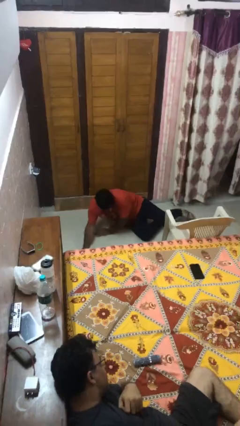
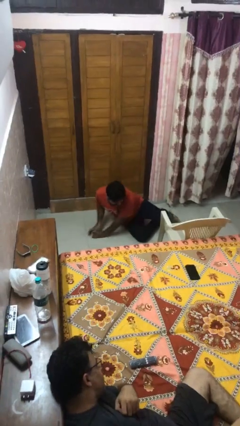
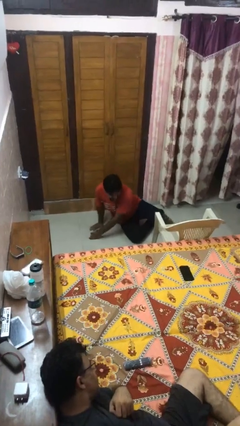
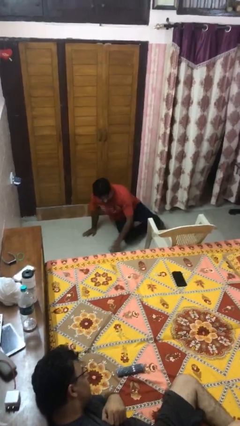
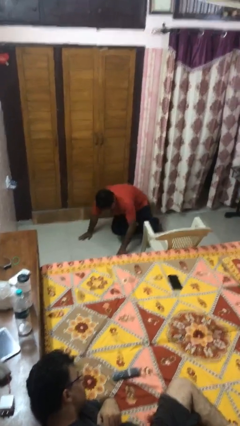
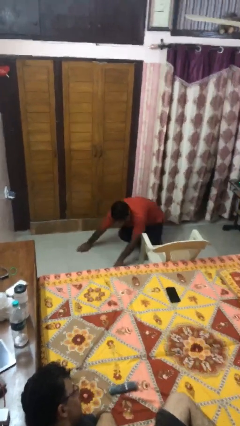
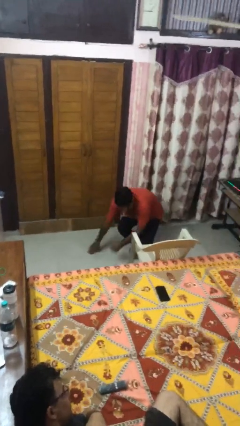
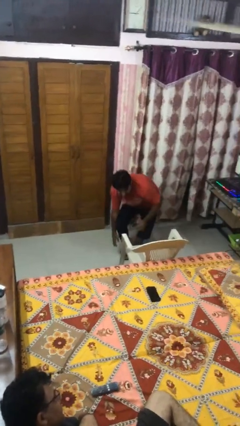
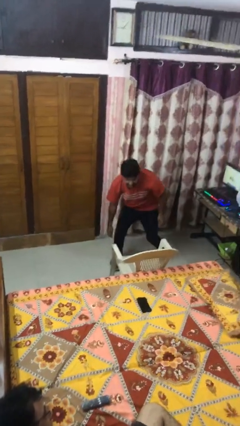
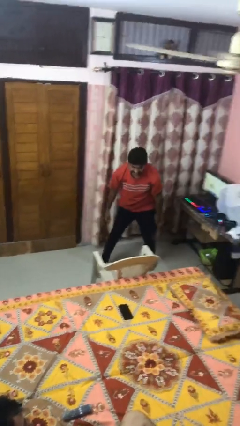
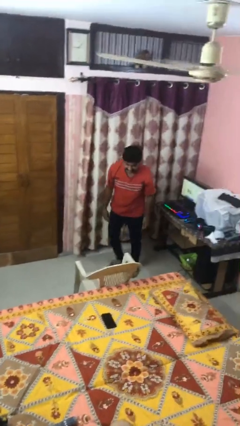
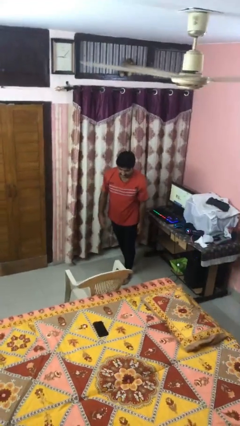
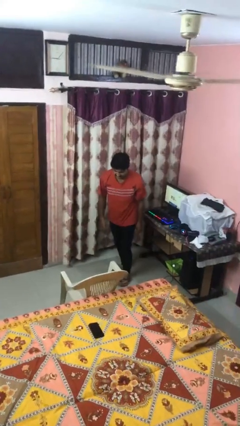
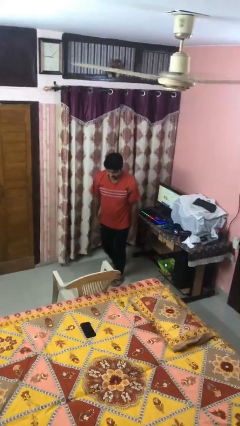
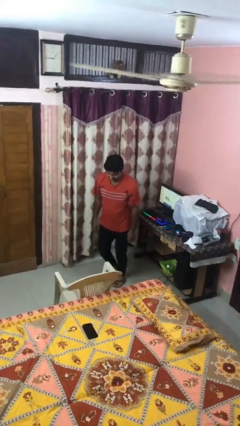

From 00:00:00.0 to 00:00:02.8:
person stands up from floor

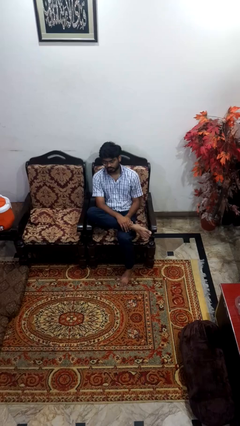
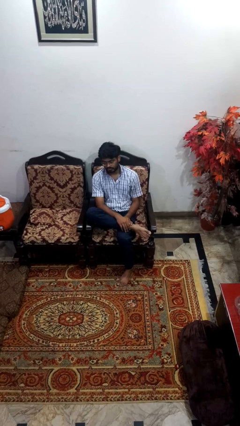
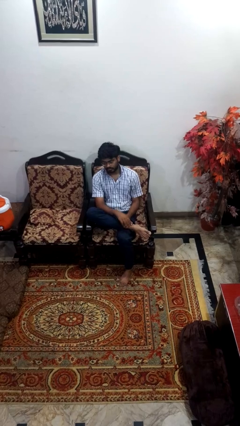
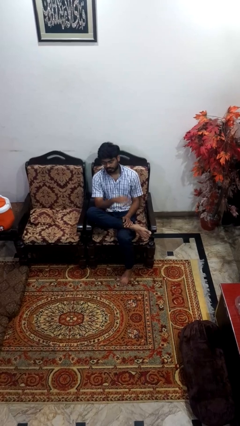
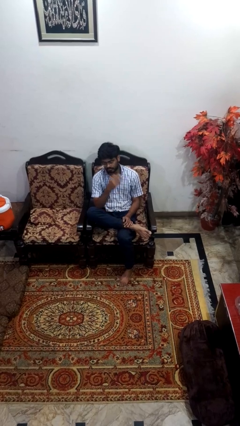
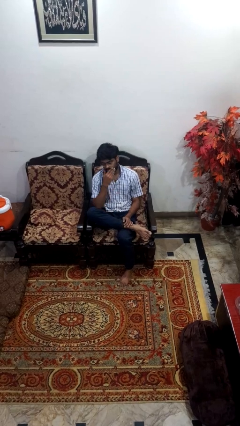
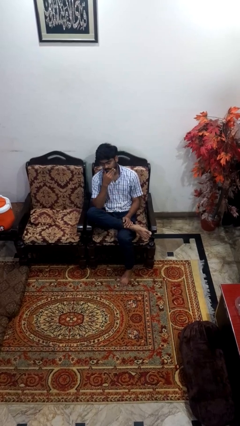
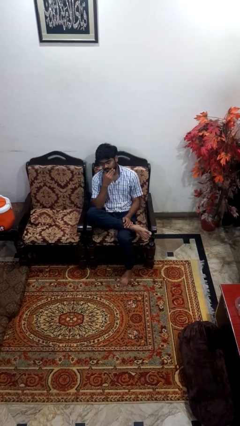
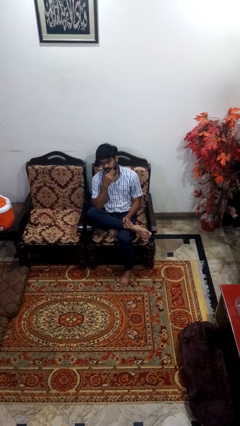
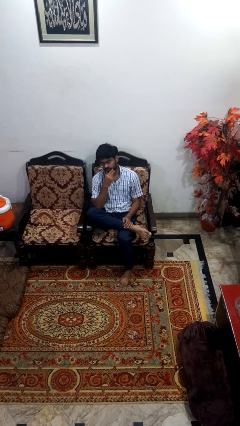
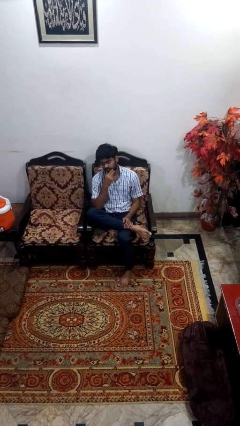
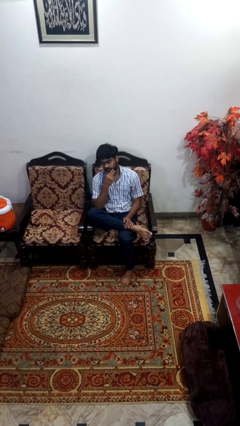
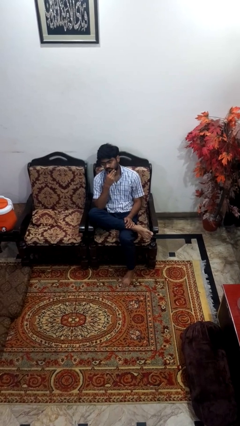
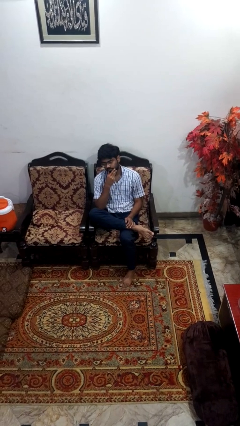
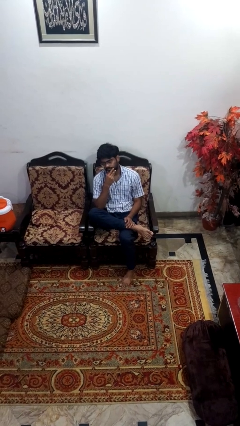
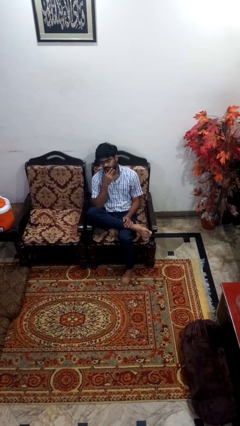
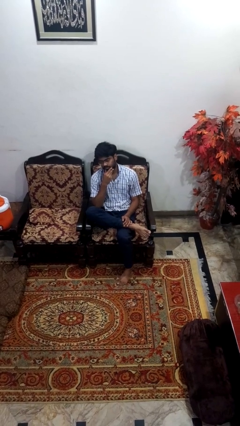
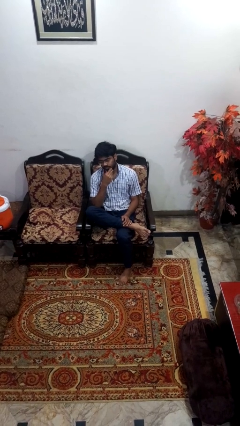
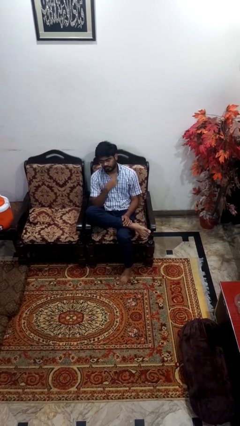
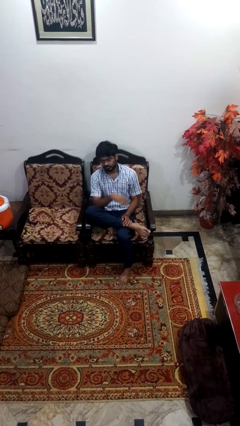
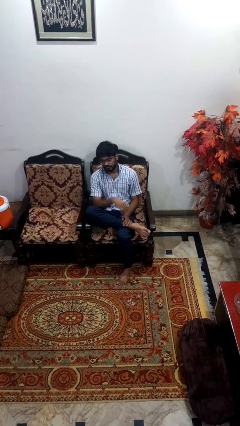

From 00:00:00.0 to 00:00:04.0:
person strokes chin

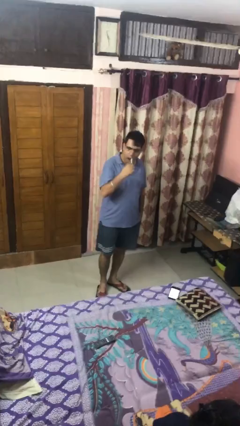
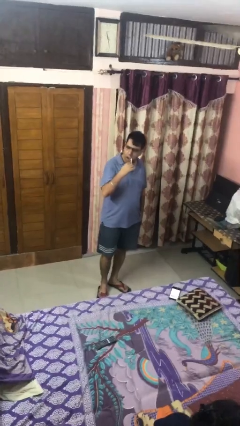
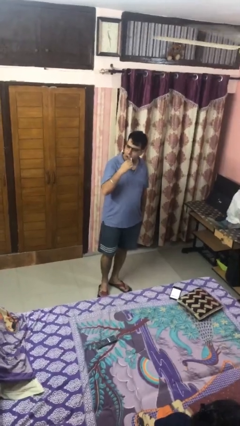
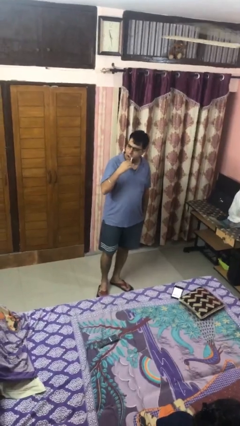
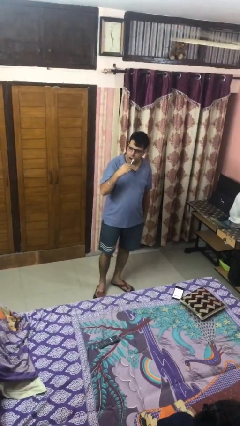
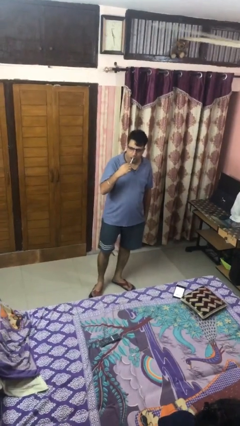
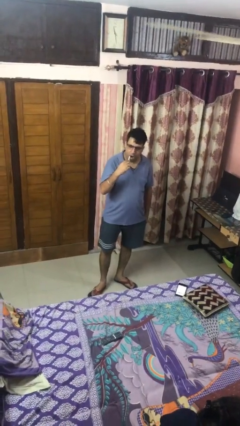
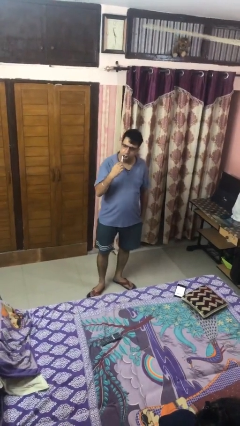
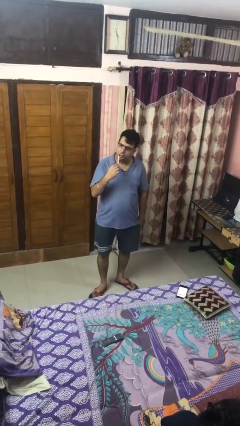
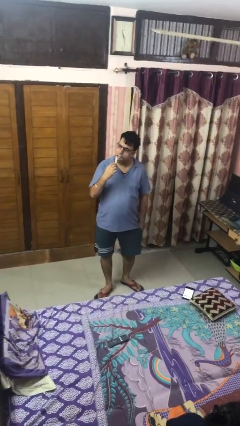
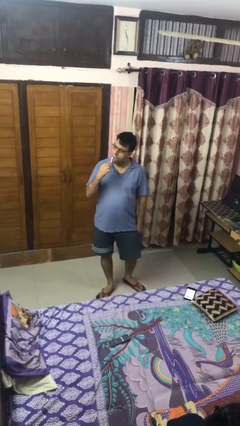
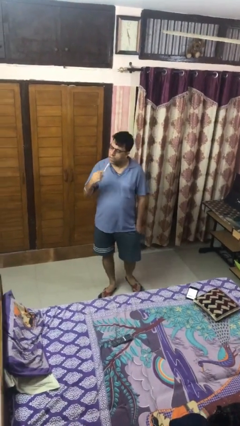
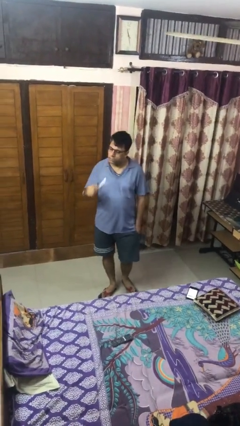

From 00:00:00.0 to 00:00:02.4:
person brushes teeth

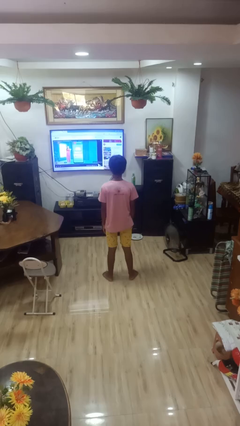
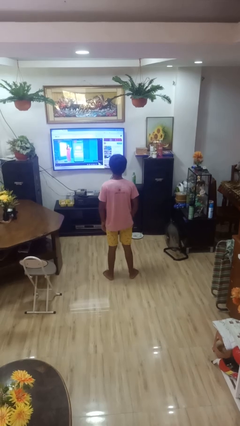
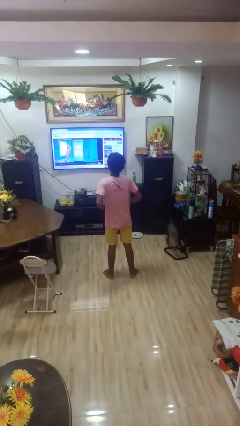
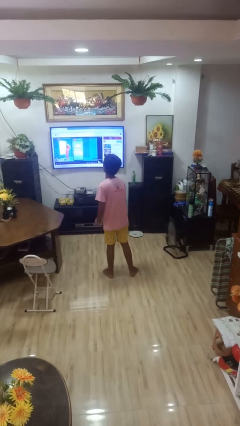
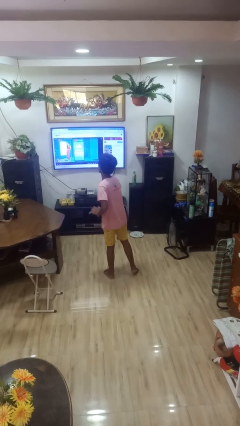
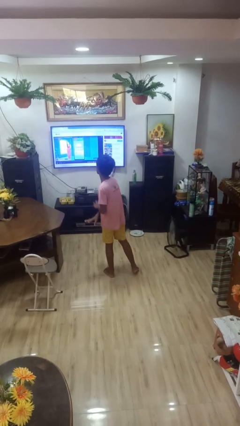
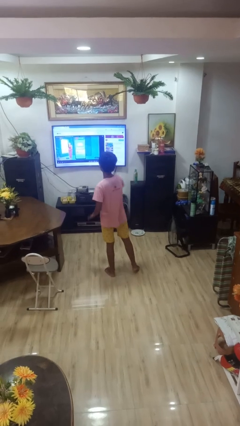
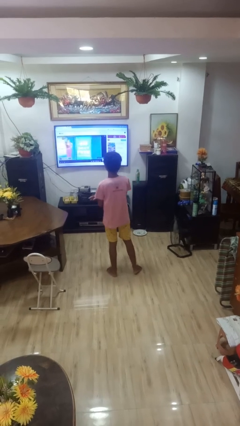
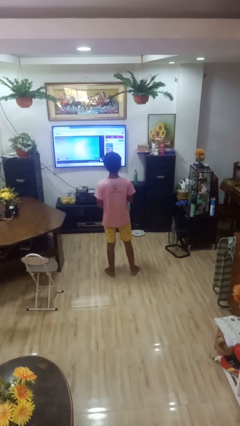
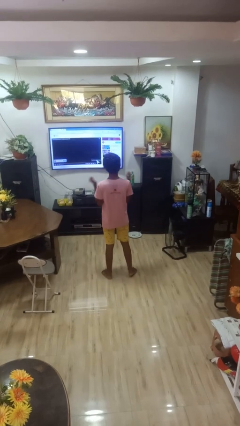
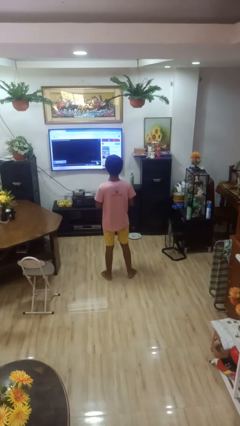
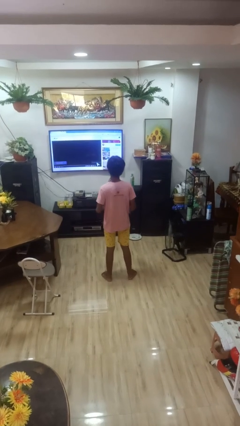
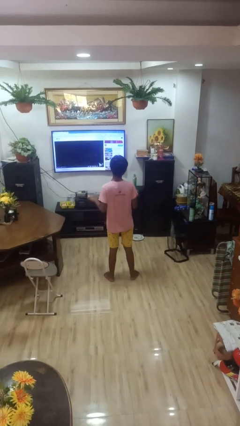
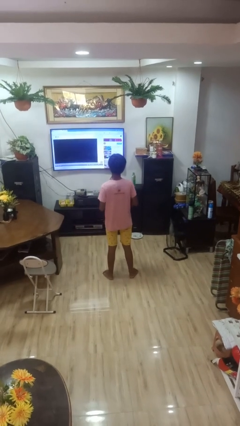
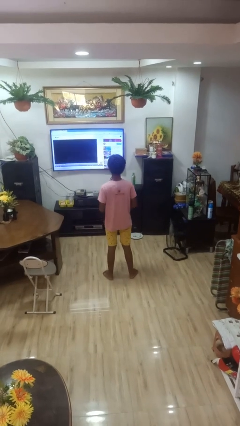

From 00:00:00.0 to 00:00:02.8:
person dances in place

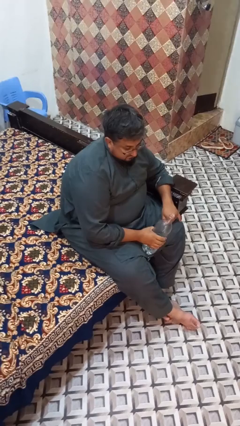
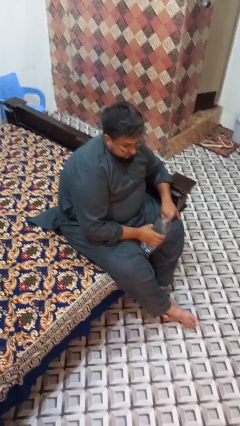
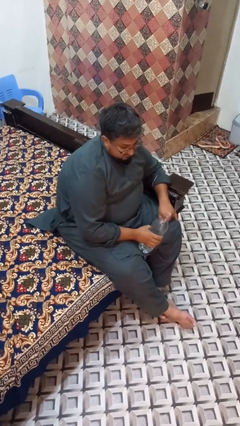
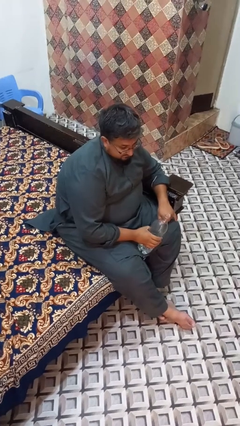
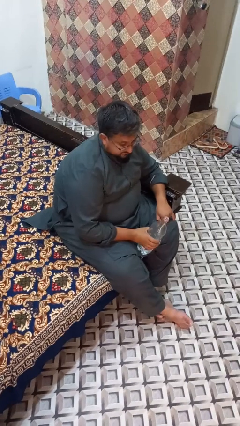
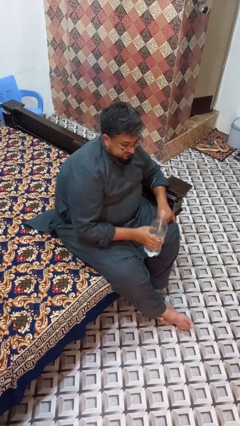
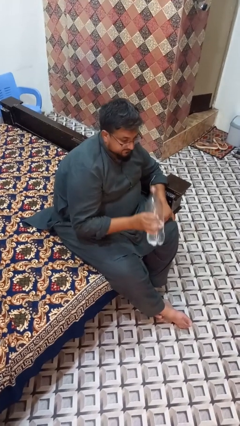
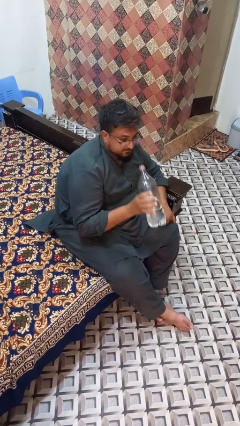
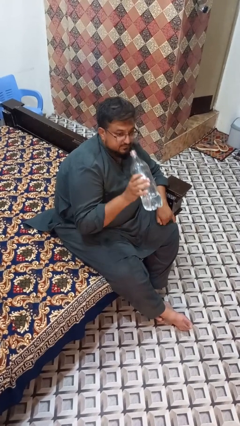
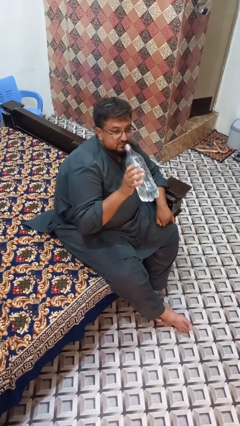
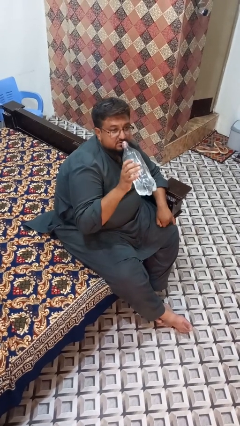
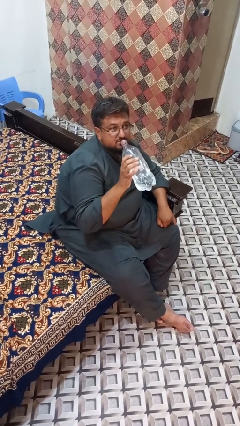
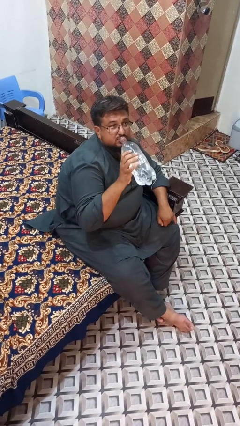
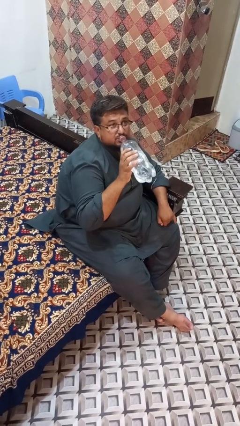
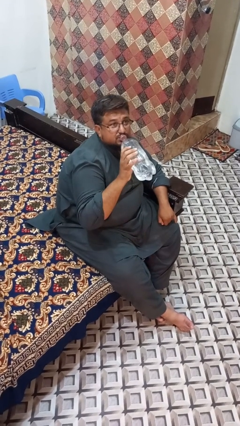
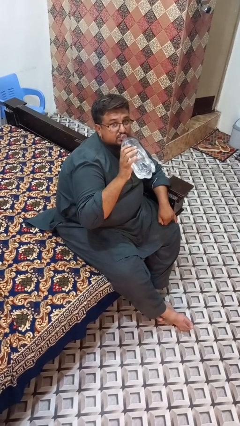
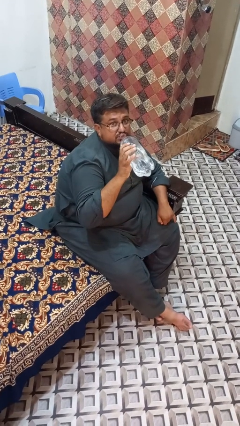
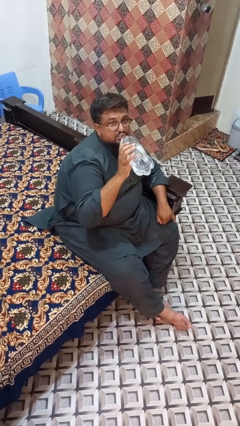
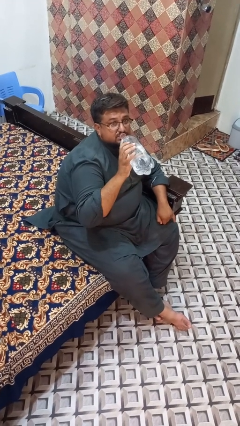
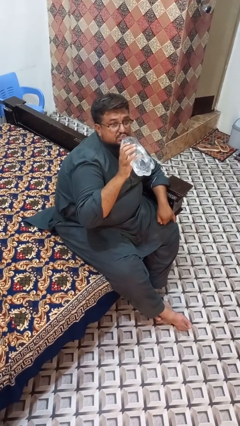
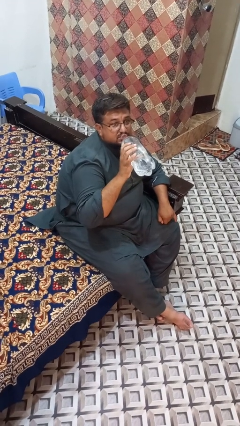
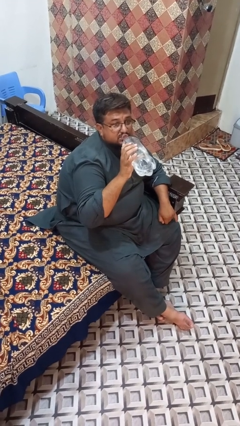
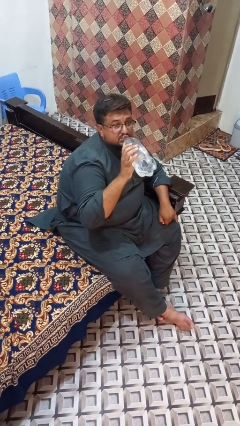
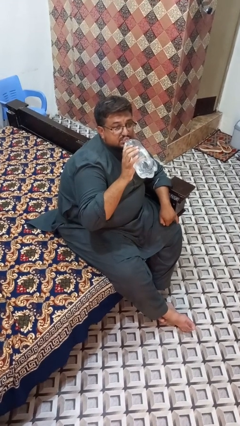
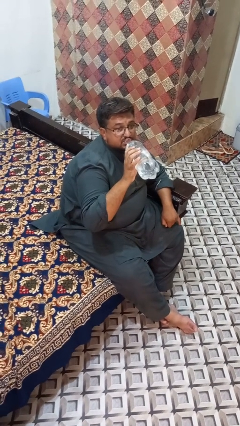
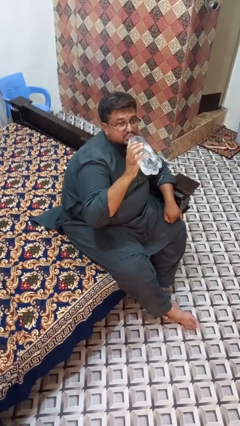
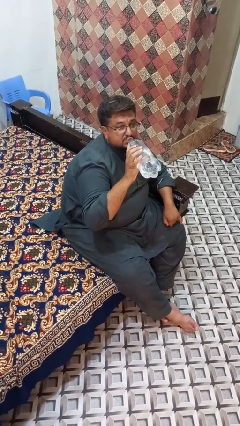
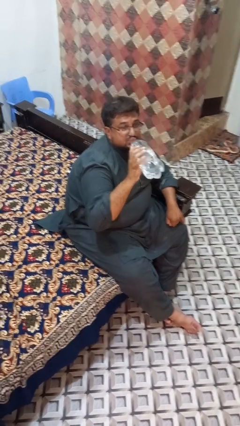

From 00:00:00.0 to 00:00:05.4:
person drinks from bottle
